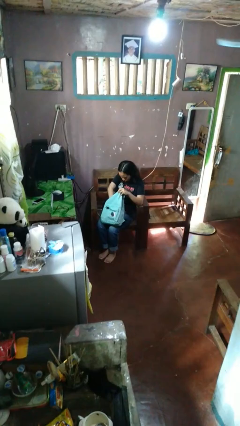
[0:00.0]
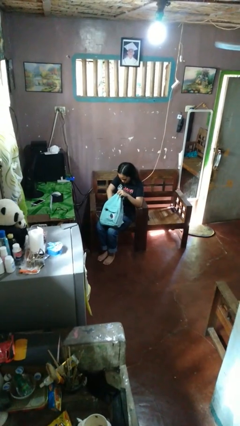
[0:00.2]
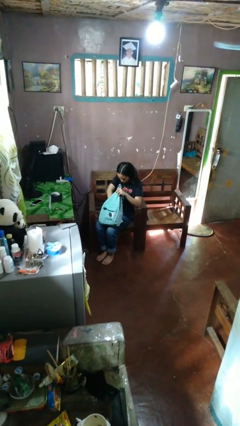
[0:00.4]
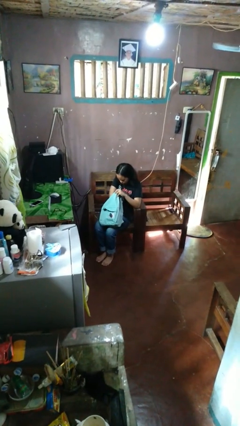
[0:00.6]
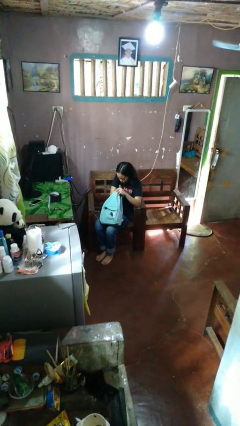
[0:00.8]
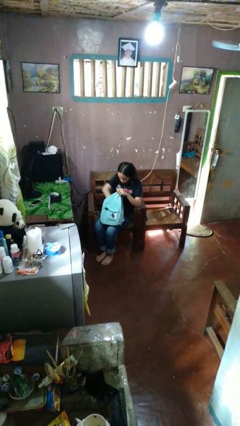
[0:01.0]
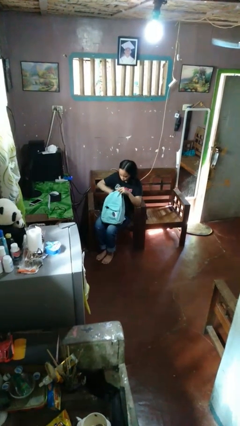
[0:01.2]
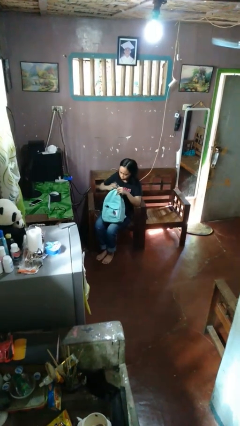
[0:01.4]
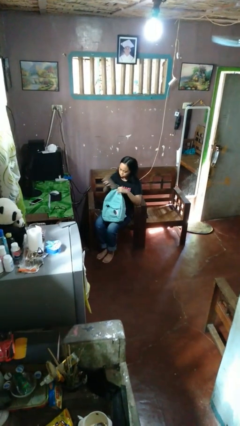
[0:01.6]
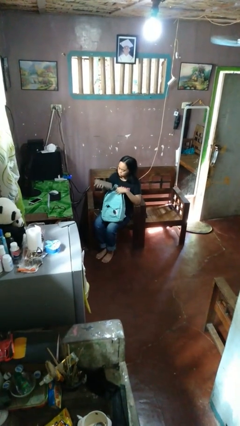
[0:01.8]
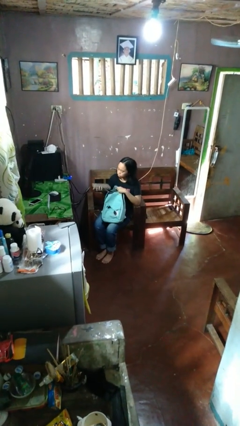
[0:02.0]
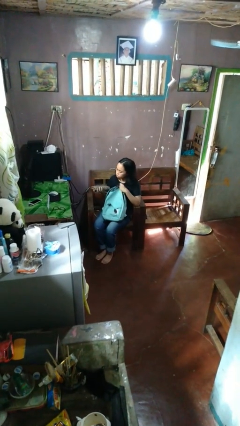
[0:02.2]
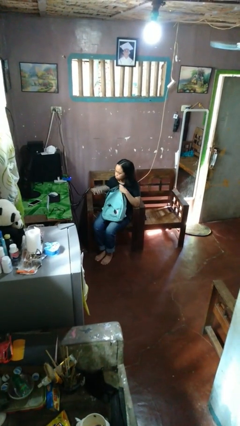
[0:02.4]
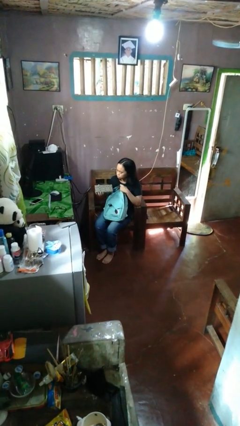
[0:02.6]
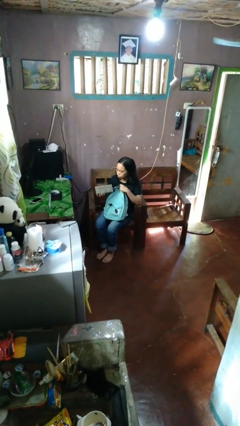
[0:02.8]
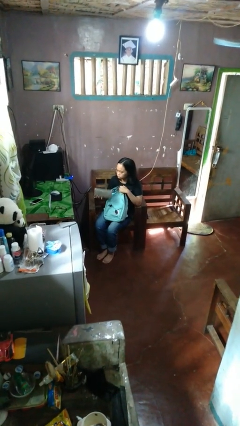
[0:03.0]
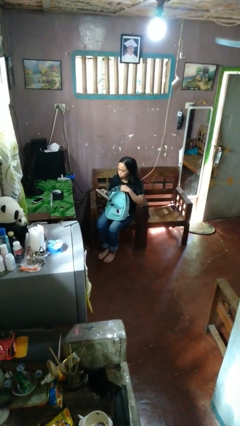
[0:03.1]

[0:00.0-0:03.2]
person takes object from backpack

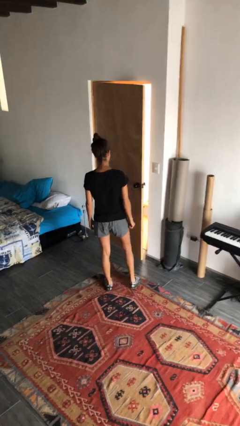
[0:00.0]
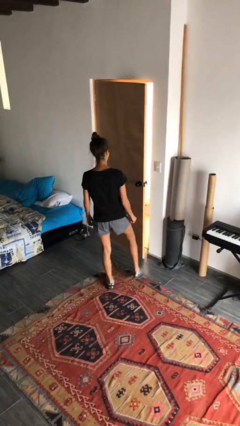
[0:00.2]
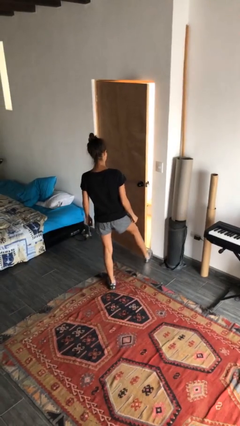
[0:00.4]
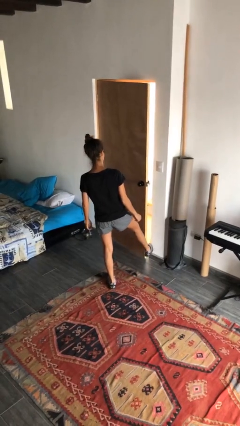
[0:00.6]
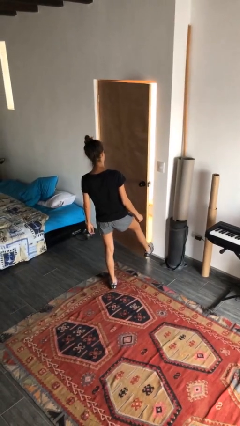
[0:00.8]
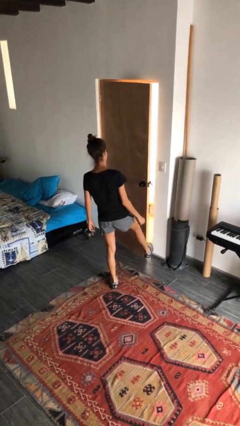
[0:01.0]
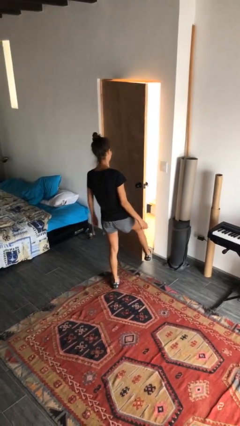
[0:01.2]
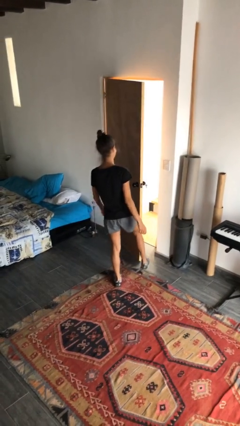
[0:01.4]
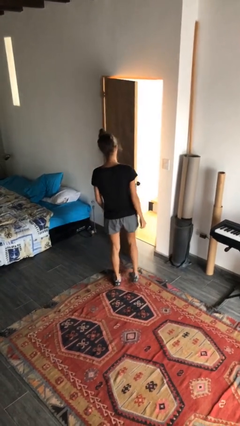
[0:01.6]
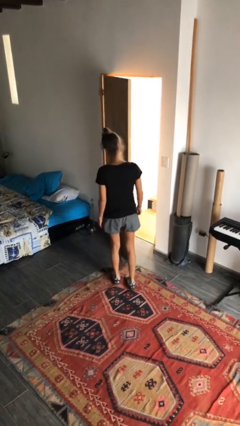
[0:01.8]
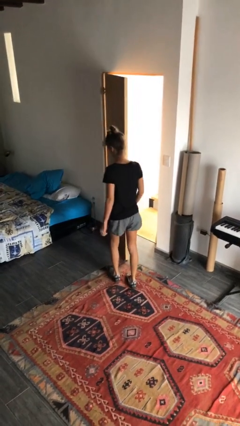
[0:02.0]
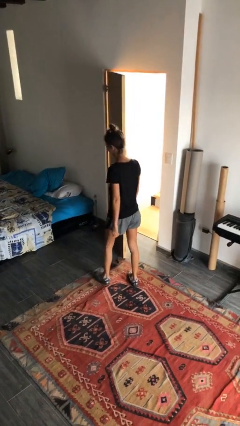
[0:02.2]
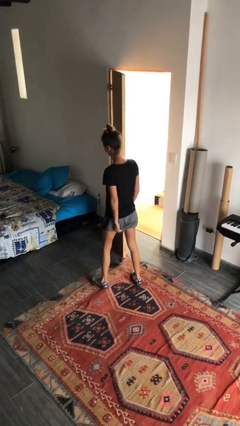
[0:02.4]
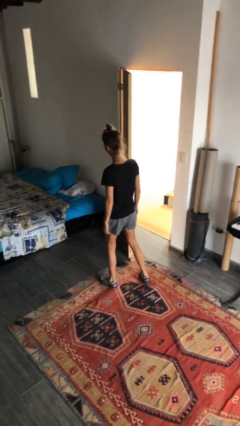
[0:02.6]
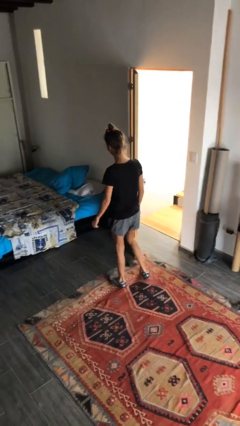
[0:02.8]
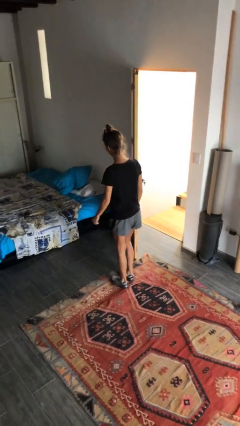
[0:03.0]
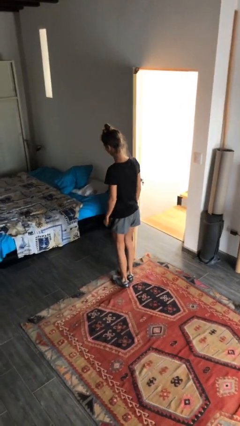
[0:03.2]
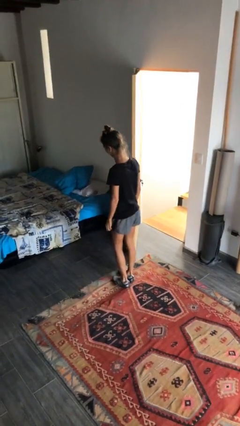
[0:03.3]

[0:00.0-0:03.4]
person opens facility door

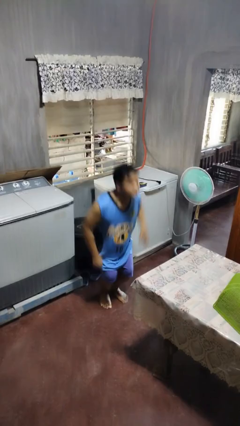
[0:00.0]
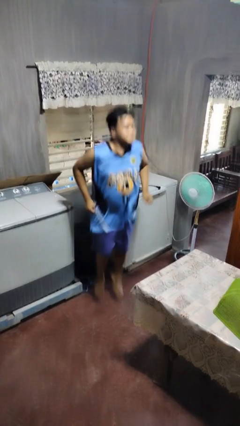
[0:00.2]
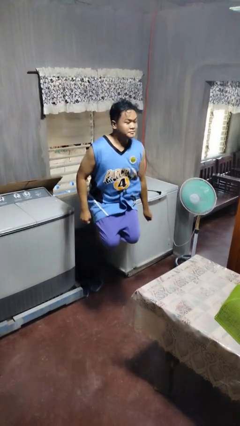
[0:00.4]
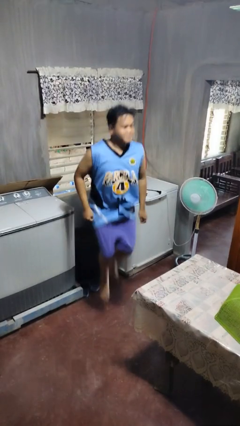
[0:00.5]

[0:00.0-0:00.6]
person jumps

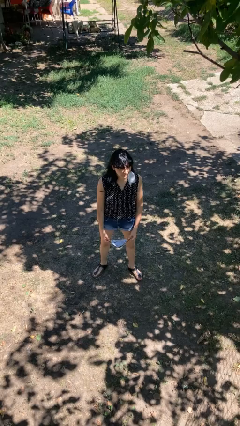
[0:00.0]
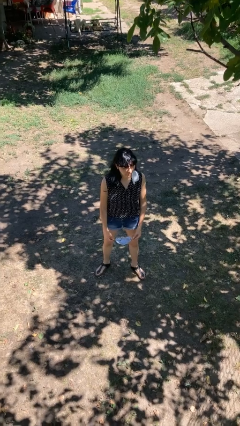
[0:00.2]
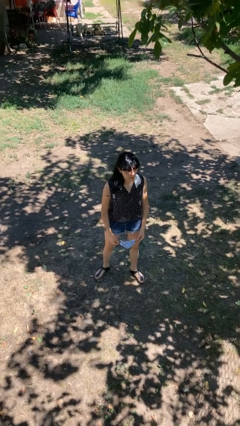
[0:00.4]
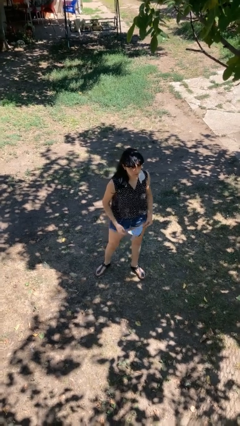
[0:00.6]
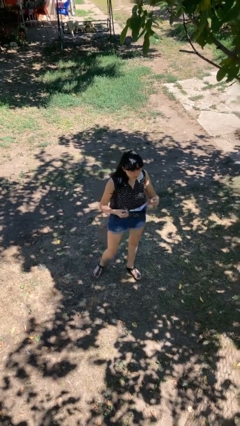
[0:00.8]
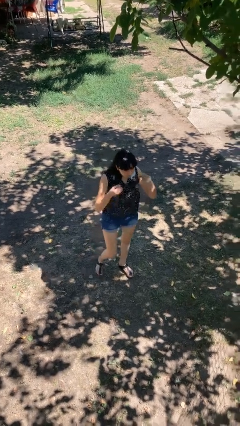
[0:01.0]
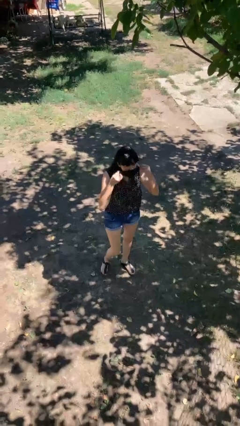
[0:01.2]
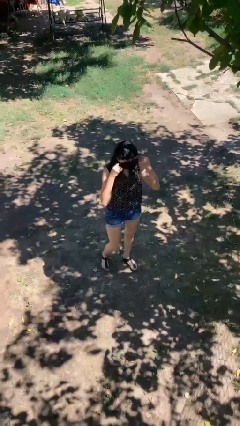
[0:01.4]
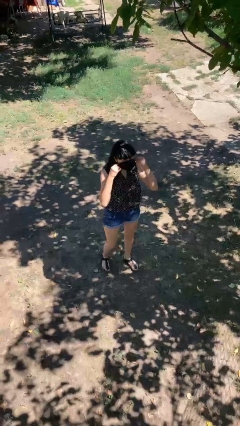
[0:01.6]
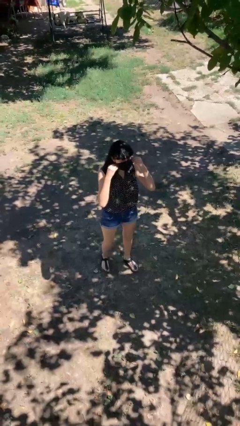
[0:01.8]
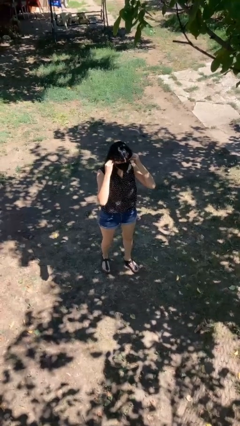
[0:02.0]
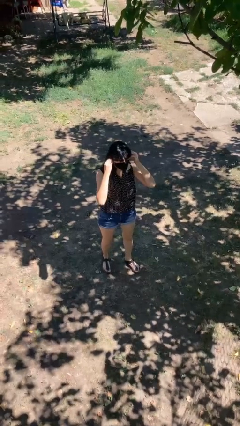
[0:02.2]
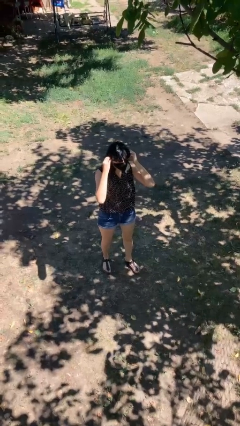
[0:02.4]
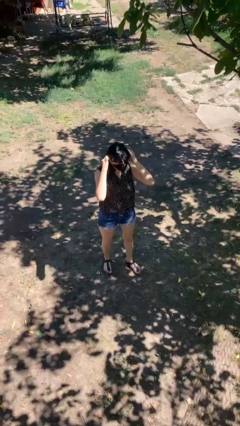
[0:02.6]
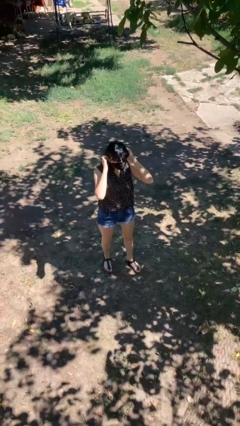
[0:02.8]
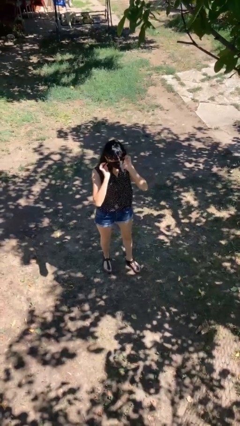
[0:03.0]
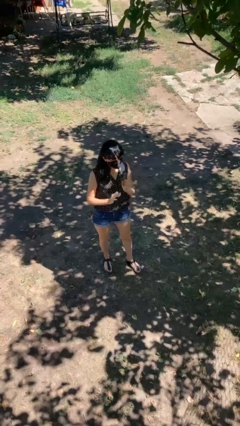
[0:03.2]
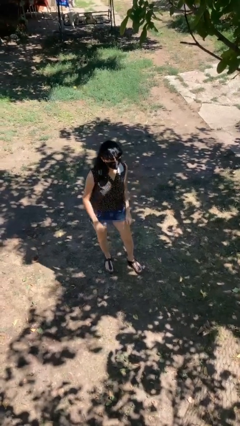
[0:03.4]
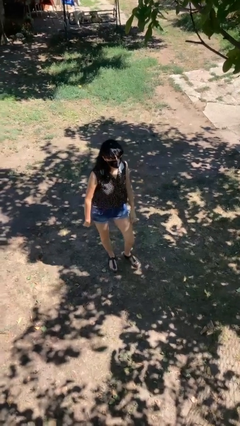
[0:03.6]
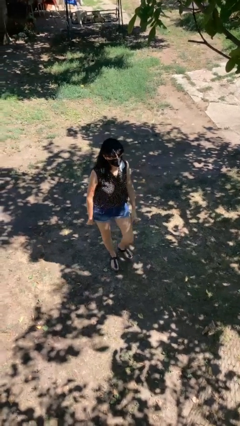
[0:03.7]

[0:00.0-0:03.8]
person puts on facemask

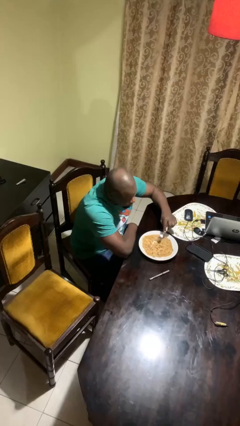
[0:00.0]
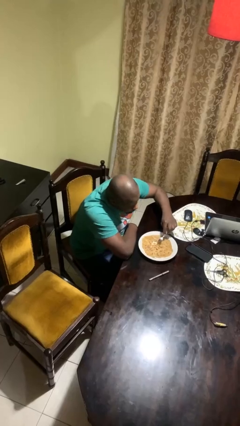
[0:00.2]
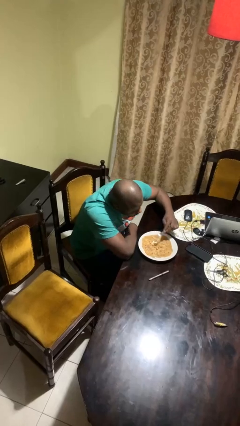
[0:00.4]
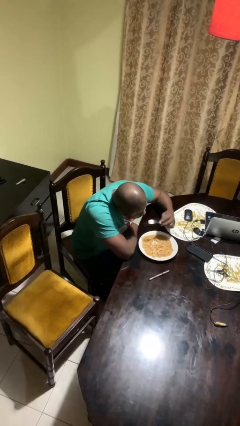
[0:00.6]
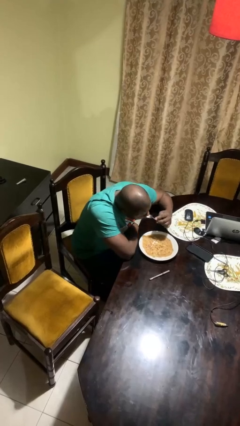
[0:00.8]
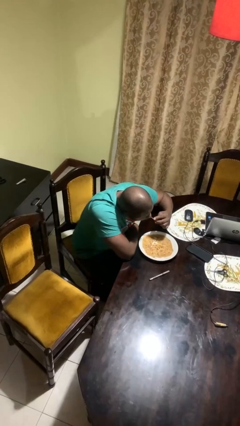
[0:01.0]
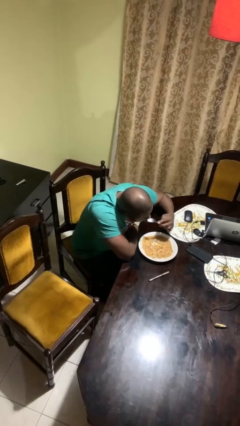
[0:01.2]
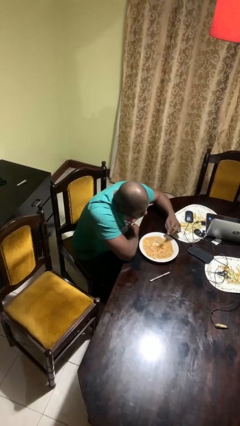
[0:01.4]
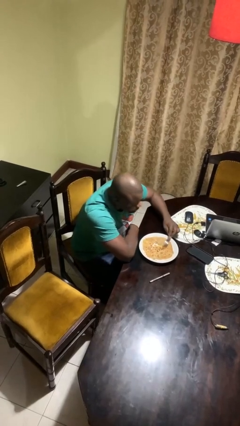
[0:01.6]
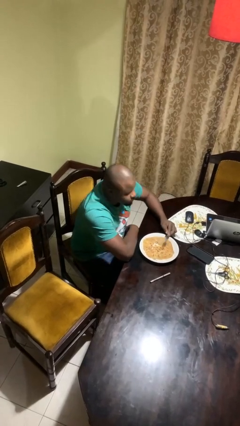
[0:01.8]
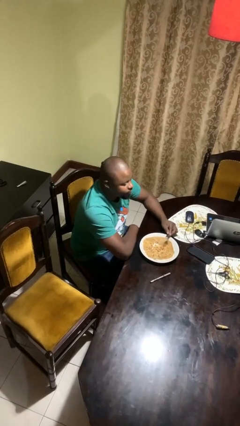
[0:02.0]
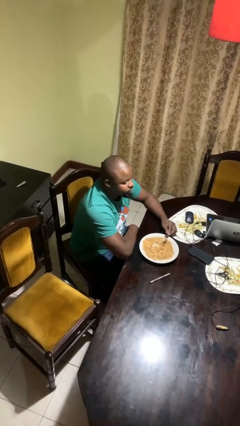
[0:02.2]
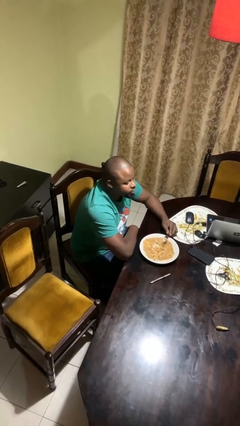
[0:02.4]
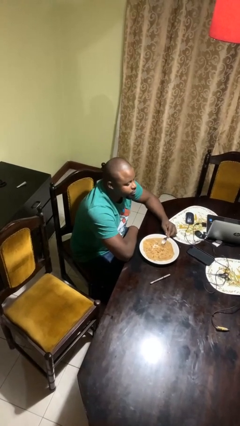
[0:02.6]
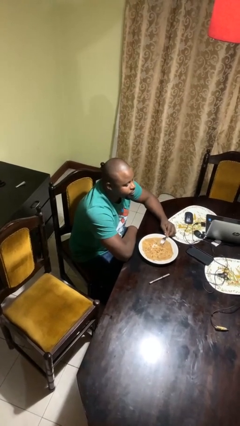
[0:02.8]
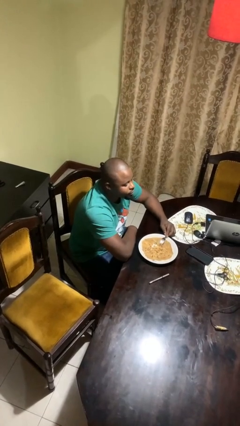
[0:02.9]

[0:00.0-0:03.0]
person eats with utensil

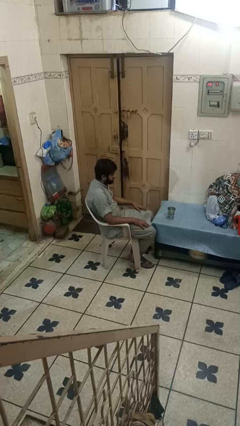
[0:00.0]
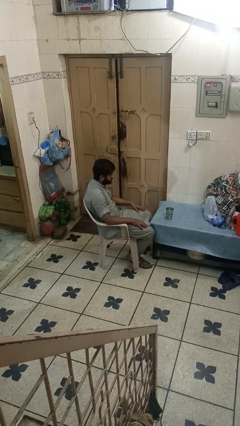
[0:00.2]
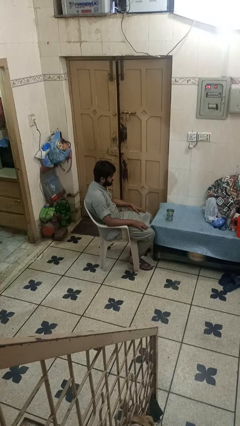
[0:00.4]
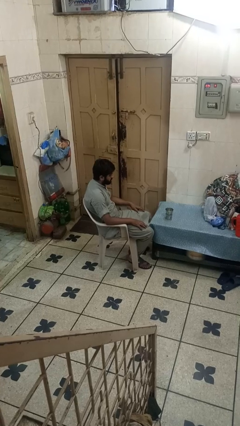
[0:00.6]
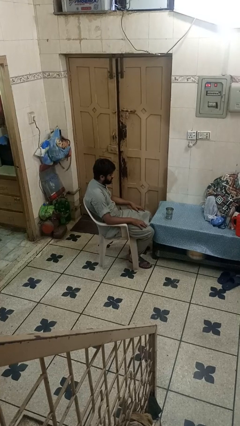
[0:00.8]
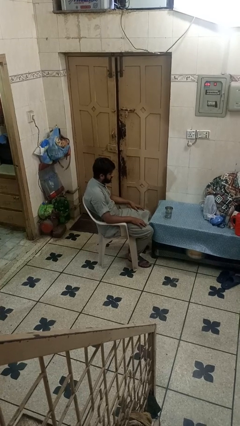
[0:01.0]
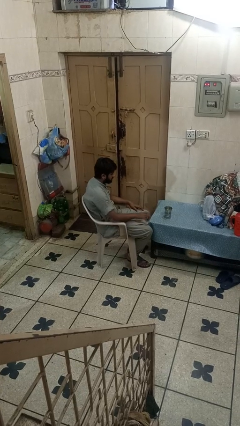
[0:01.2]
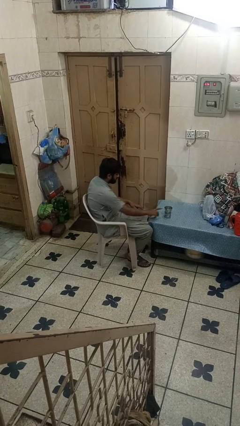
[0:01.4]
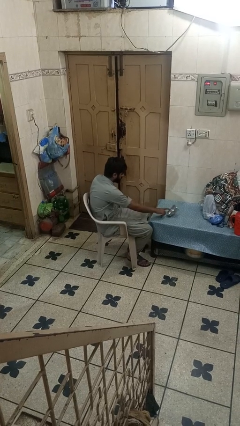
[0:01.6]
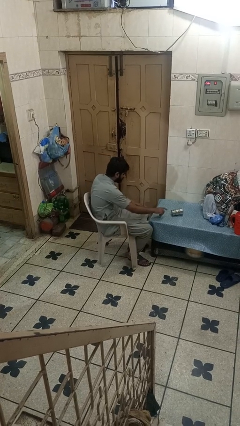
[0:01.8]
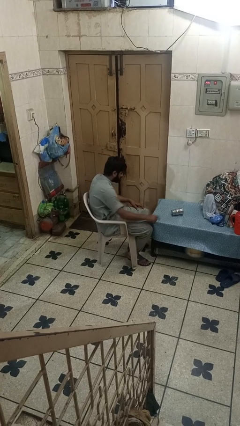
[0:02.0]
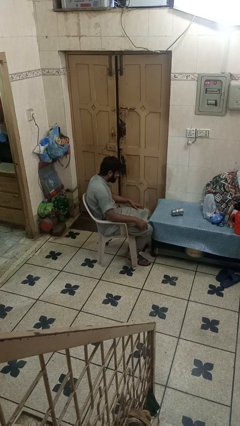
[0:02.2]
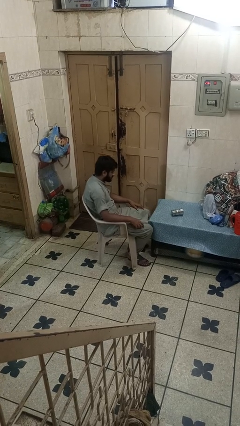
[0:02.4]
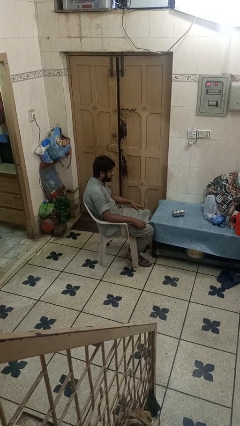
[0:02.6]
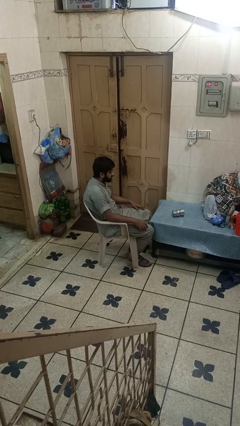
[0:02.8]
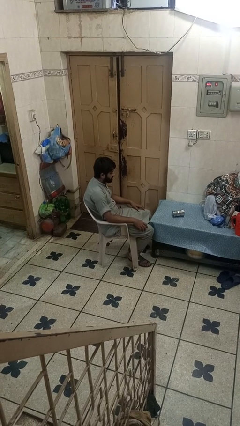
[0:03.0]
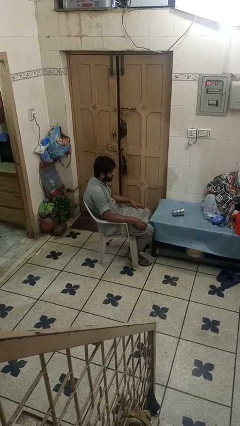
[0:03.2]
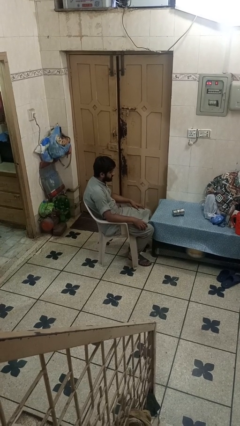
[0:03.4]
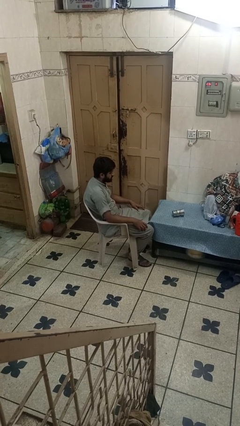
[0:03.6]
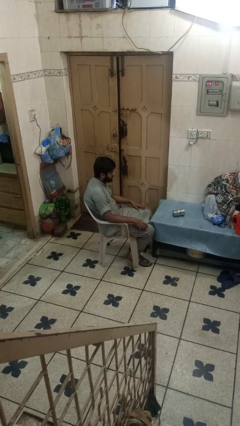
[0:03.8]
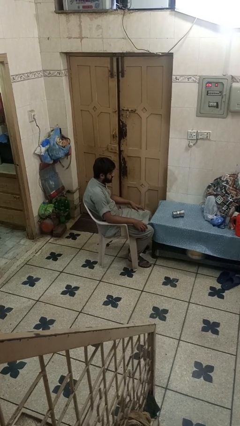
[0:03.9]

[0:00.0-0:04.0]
person knocks over glass
